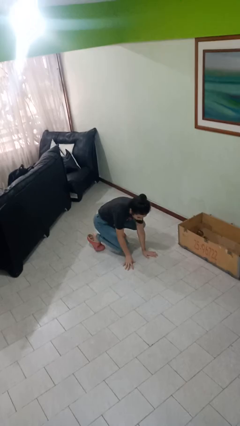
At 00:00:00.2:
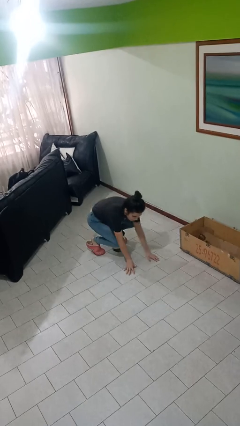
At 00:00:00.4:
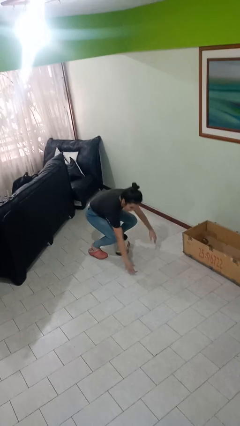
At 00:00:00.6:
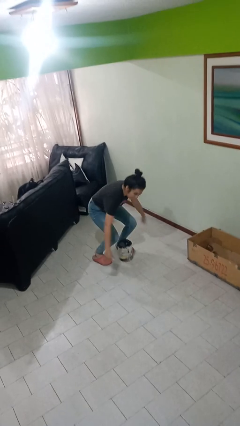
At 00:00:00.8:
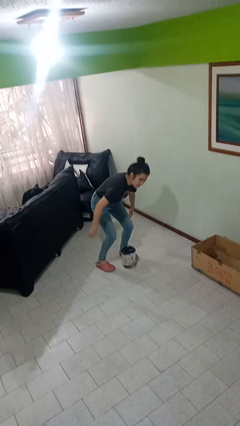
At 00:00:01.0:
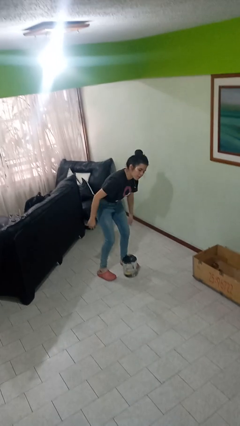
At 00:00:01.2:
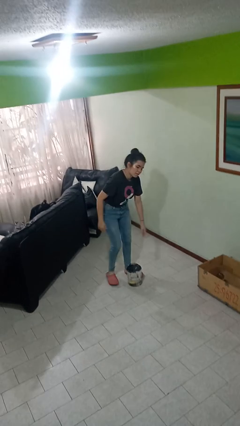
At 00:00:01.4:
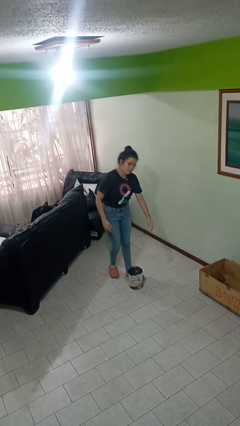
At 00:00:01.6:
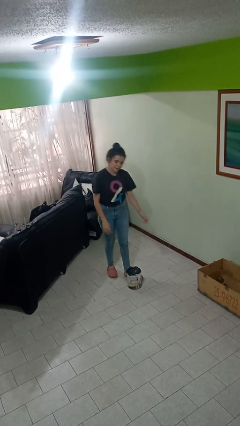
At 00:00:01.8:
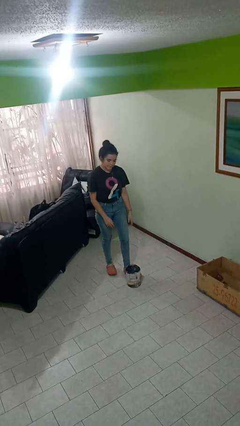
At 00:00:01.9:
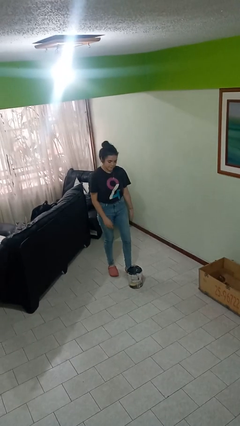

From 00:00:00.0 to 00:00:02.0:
person stands up from floor

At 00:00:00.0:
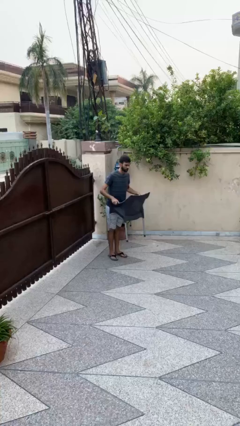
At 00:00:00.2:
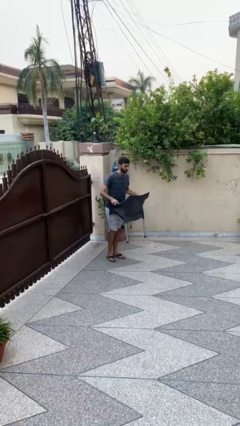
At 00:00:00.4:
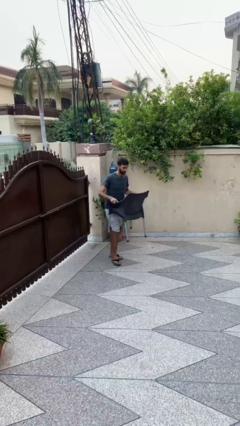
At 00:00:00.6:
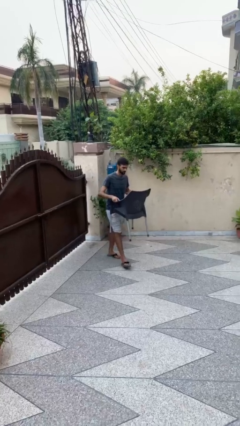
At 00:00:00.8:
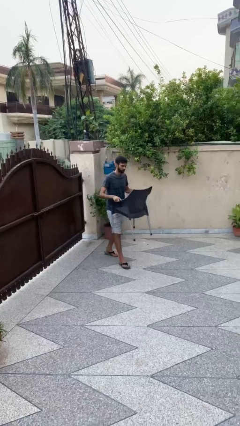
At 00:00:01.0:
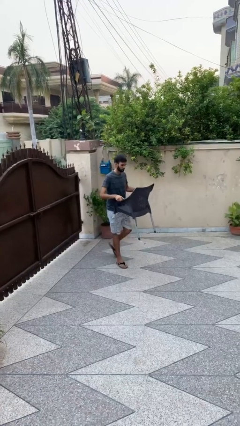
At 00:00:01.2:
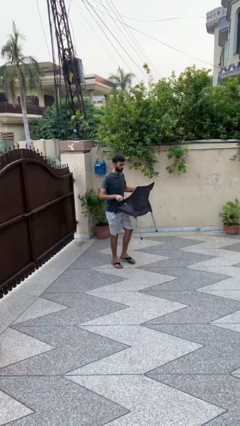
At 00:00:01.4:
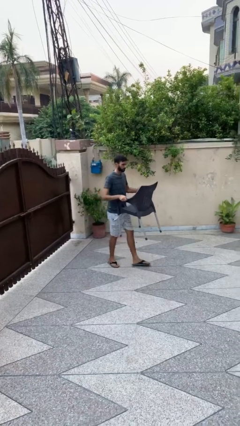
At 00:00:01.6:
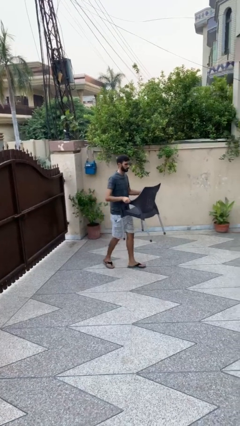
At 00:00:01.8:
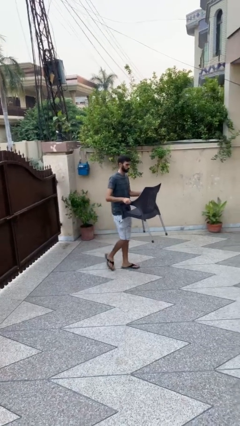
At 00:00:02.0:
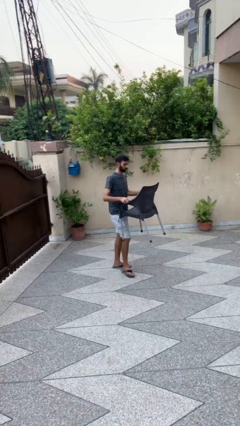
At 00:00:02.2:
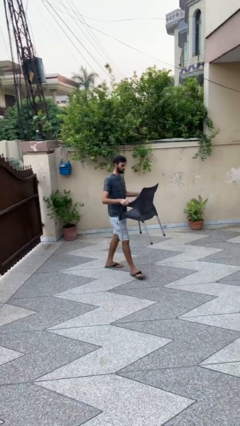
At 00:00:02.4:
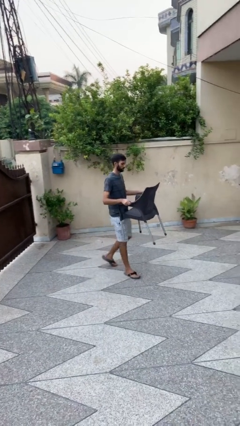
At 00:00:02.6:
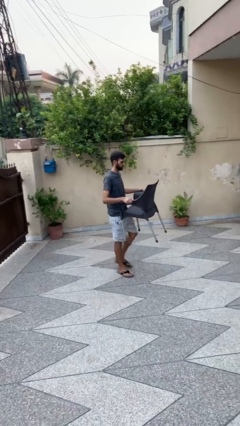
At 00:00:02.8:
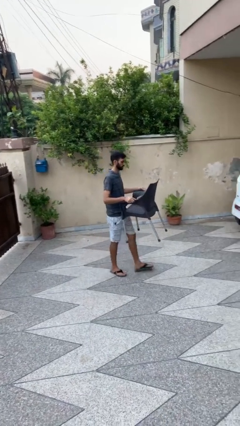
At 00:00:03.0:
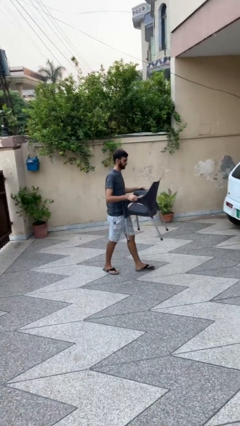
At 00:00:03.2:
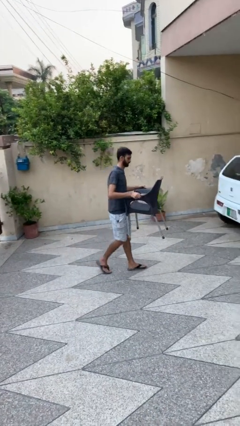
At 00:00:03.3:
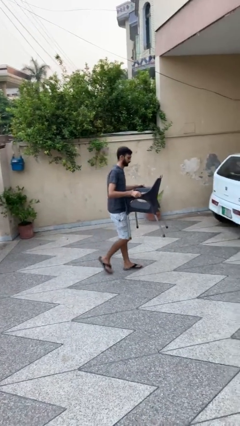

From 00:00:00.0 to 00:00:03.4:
person carries heavy object

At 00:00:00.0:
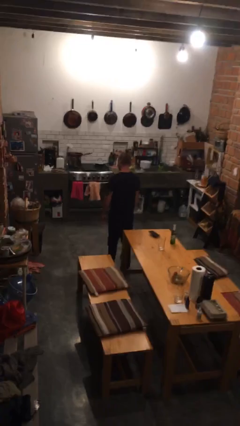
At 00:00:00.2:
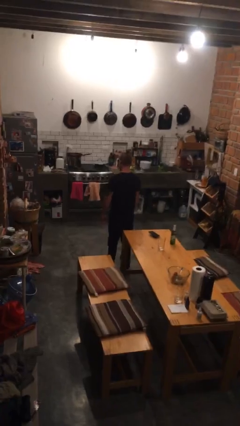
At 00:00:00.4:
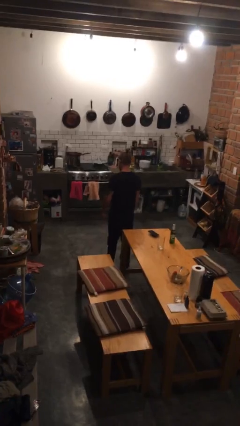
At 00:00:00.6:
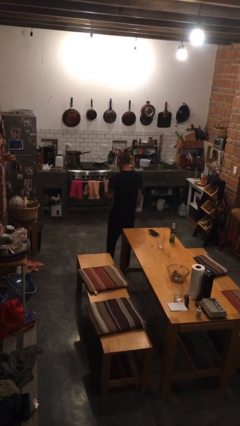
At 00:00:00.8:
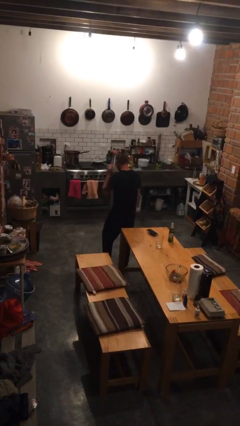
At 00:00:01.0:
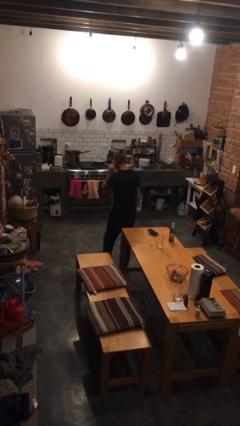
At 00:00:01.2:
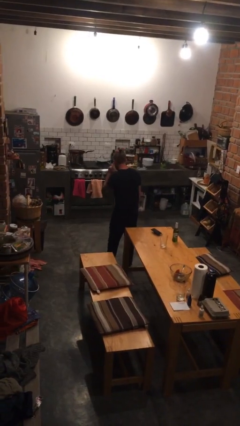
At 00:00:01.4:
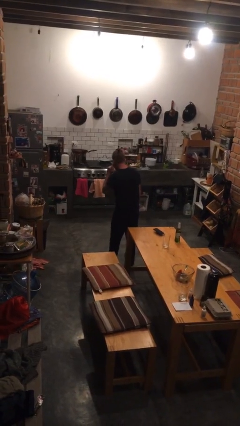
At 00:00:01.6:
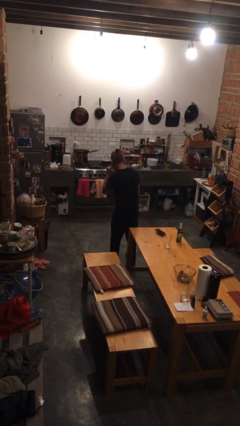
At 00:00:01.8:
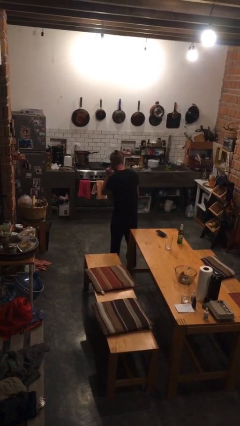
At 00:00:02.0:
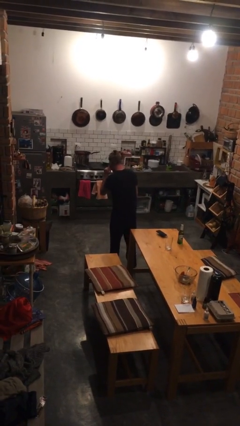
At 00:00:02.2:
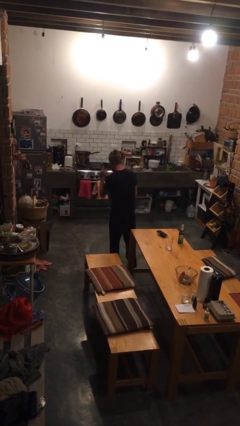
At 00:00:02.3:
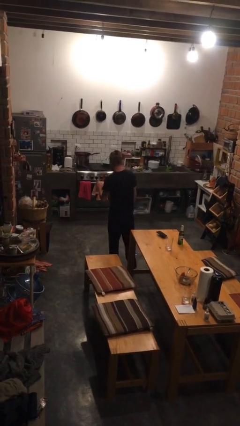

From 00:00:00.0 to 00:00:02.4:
person gestures listen closely

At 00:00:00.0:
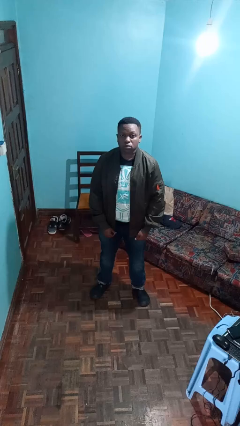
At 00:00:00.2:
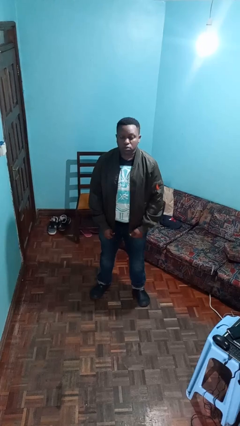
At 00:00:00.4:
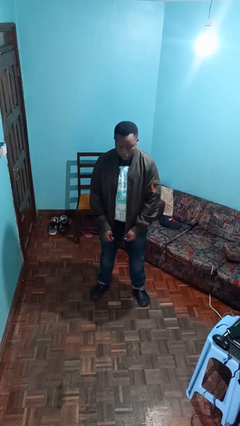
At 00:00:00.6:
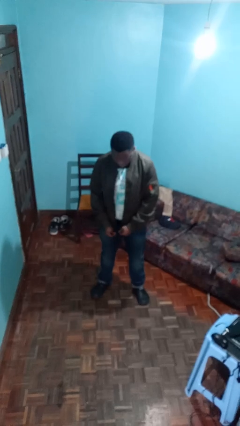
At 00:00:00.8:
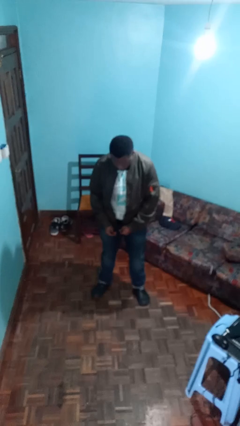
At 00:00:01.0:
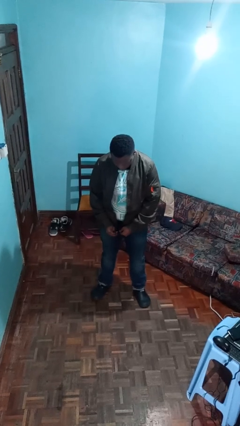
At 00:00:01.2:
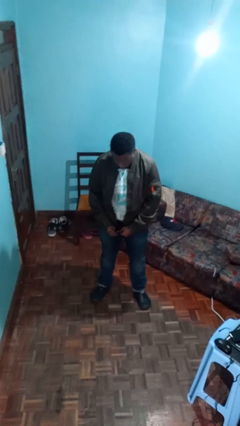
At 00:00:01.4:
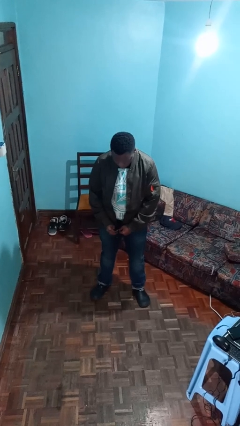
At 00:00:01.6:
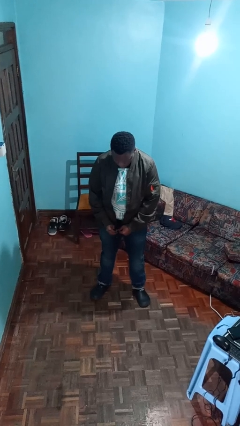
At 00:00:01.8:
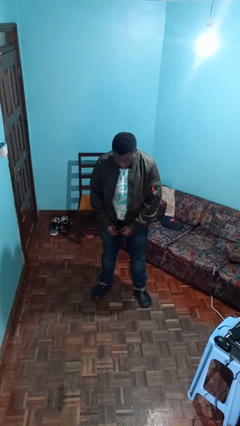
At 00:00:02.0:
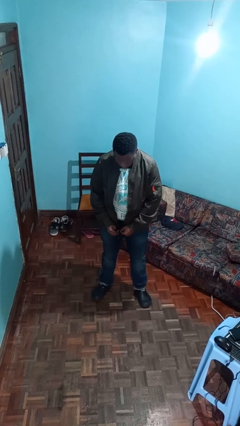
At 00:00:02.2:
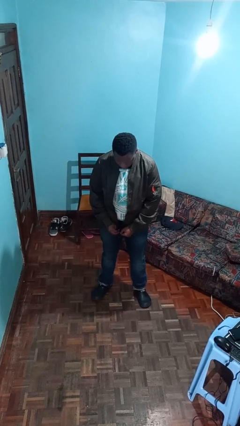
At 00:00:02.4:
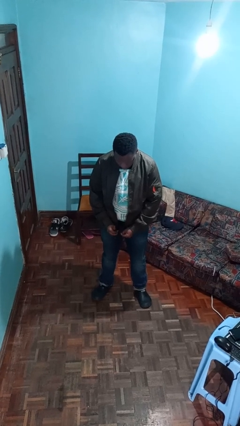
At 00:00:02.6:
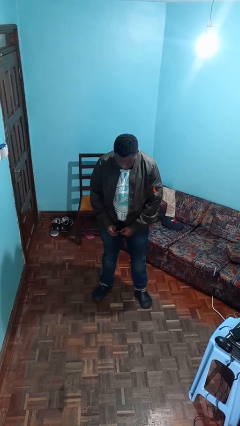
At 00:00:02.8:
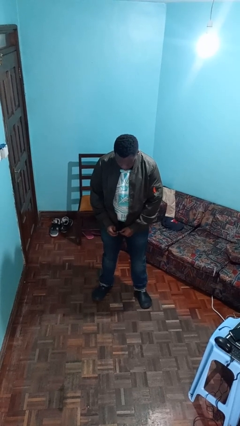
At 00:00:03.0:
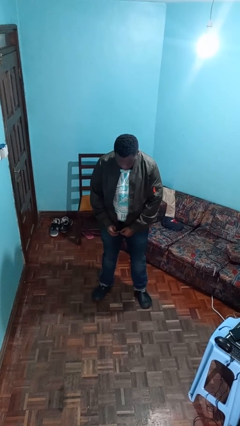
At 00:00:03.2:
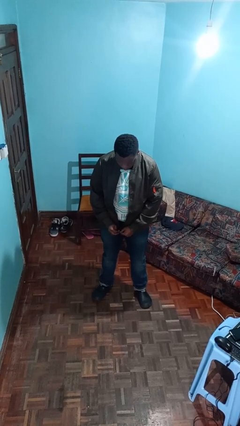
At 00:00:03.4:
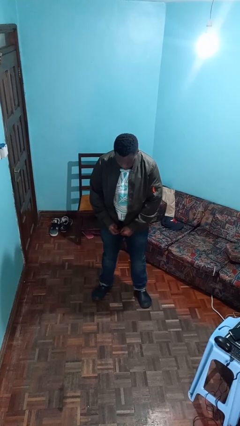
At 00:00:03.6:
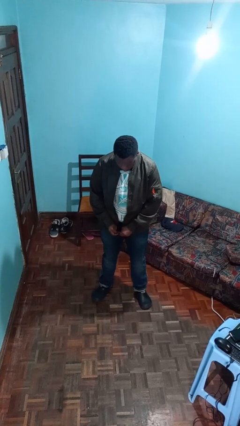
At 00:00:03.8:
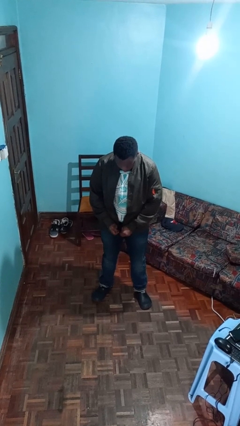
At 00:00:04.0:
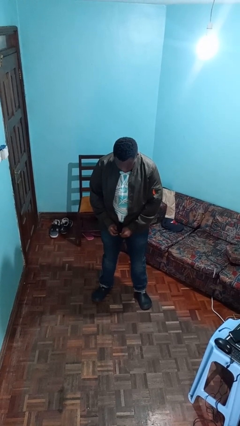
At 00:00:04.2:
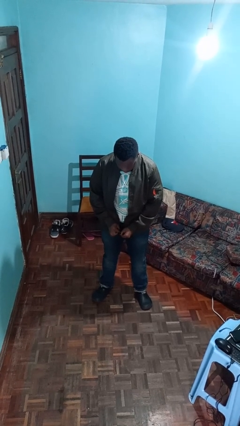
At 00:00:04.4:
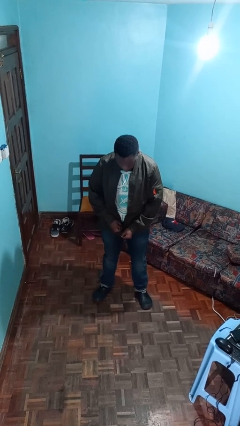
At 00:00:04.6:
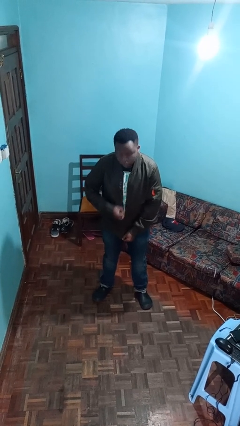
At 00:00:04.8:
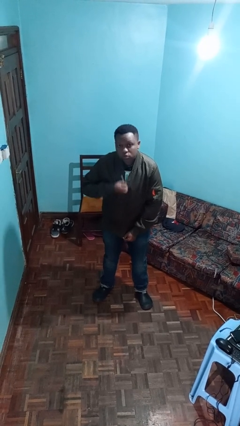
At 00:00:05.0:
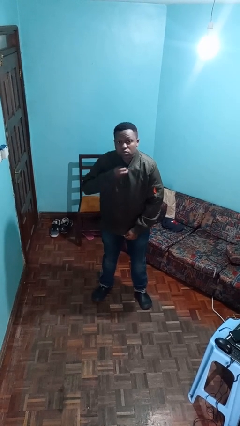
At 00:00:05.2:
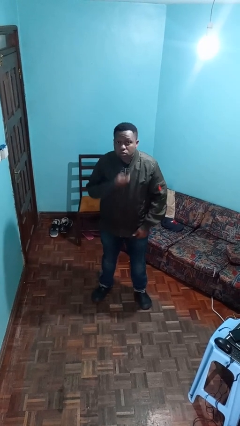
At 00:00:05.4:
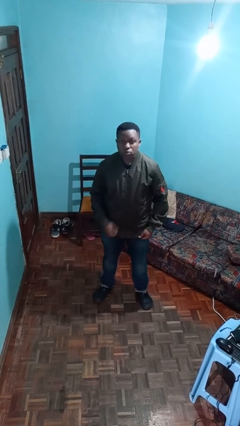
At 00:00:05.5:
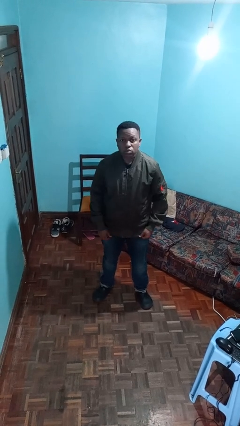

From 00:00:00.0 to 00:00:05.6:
person zips up jacket

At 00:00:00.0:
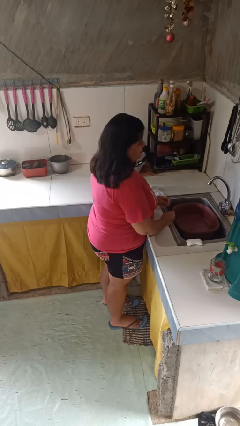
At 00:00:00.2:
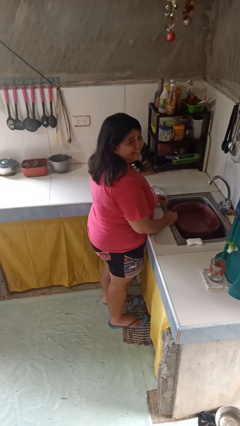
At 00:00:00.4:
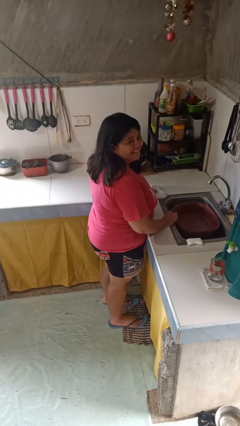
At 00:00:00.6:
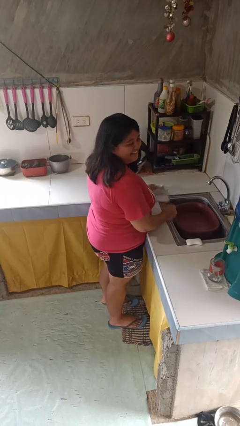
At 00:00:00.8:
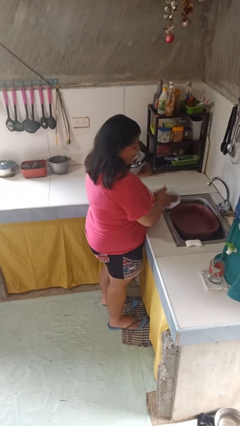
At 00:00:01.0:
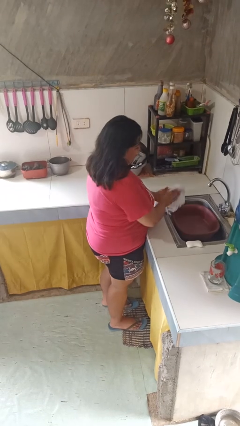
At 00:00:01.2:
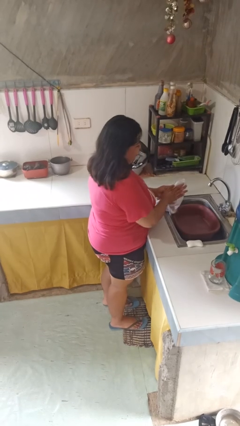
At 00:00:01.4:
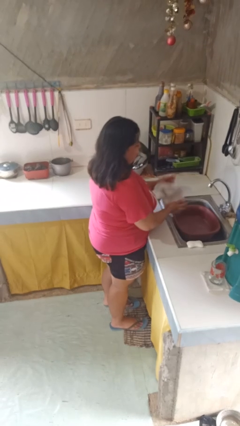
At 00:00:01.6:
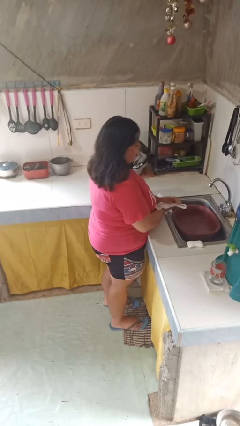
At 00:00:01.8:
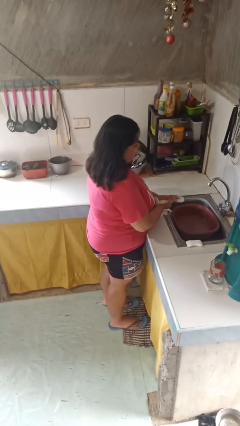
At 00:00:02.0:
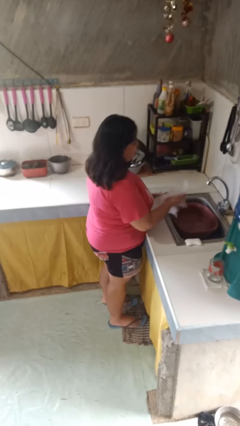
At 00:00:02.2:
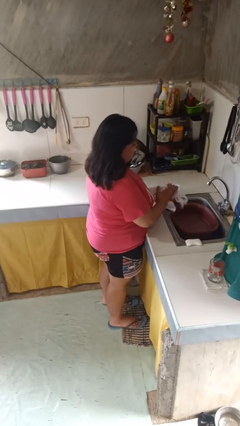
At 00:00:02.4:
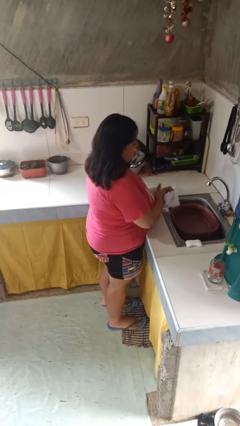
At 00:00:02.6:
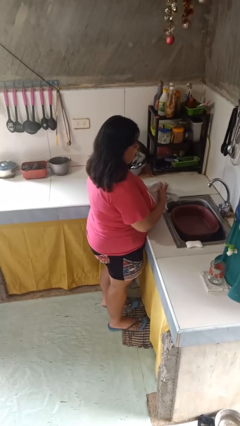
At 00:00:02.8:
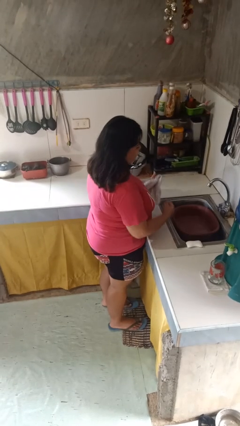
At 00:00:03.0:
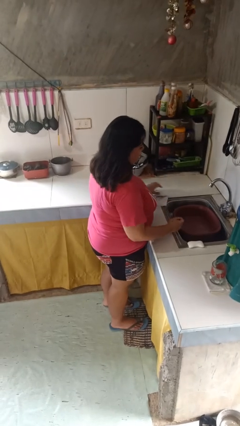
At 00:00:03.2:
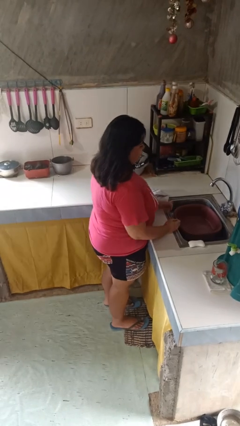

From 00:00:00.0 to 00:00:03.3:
person dries hands with towel

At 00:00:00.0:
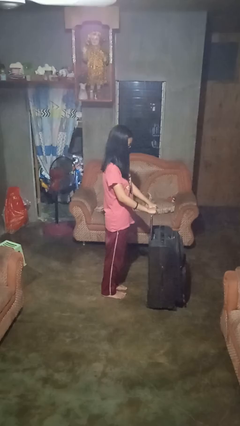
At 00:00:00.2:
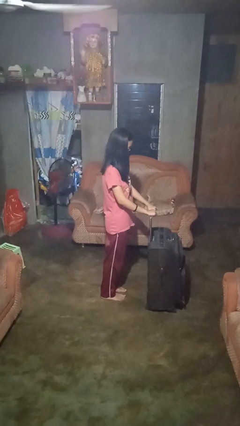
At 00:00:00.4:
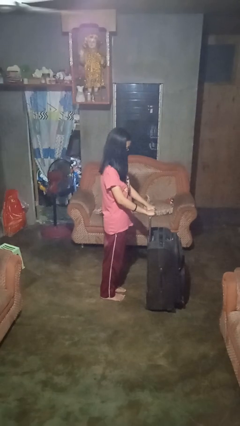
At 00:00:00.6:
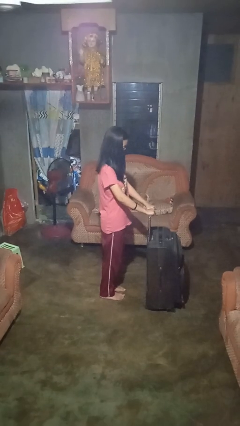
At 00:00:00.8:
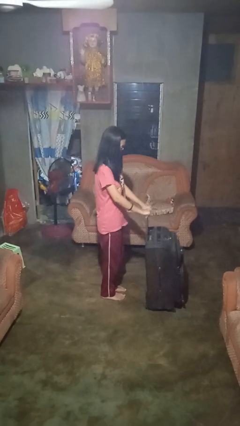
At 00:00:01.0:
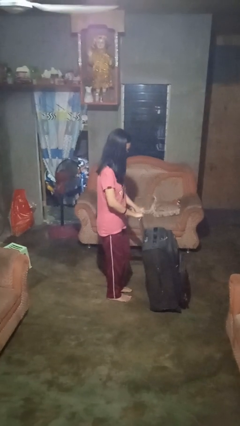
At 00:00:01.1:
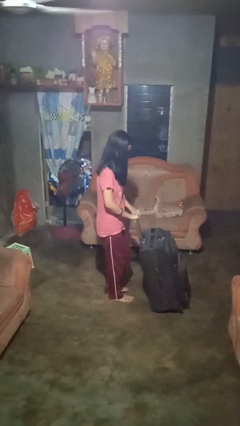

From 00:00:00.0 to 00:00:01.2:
person pulls wheeled cart
